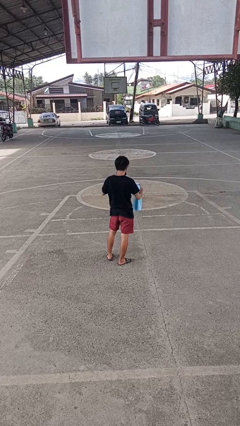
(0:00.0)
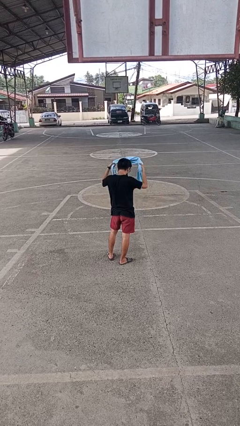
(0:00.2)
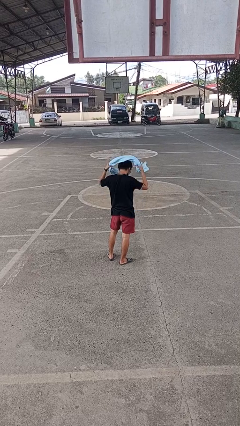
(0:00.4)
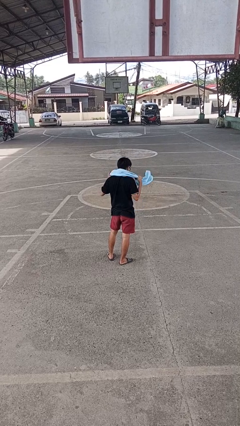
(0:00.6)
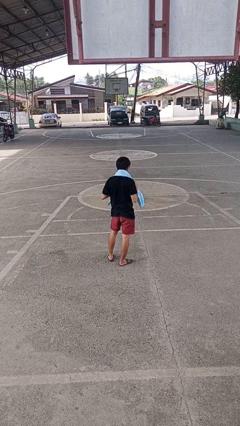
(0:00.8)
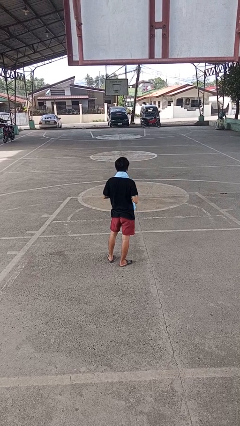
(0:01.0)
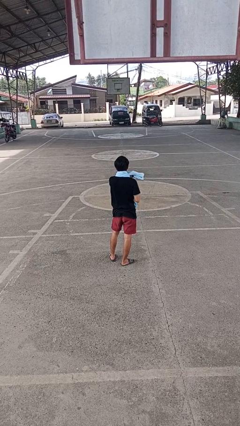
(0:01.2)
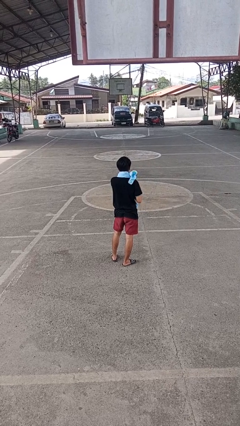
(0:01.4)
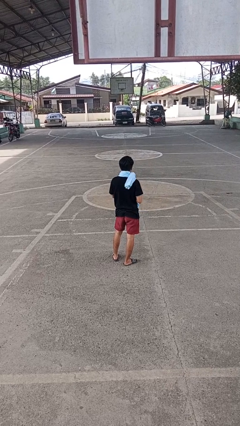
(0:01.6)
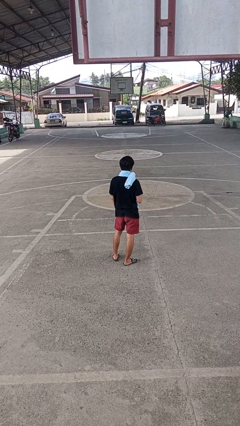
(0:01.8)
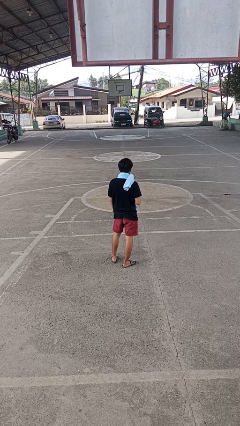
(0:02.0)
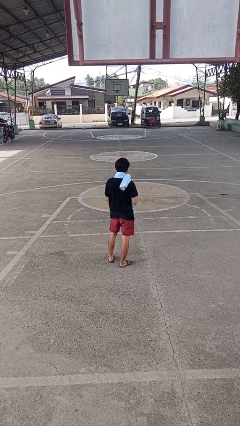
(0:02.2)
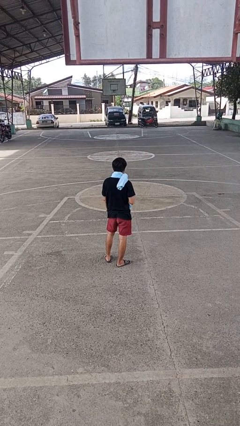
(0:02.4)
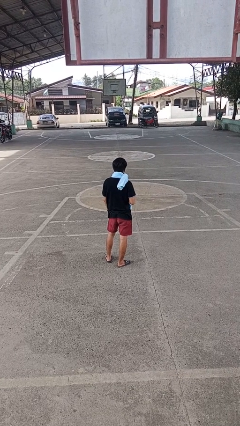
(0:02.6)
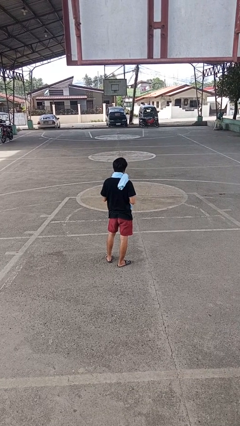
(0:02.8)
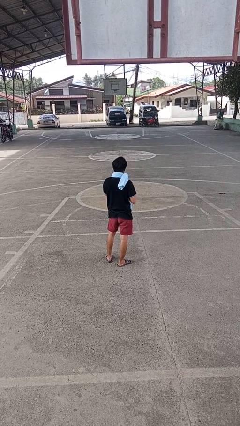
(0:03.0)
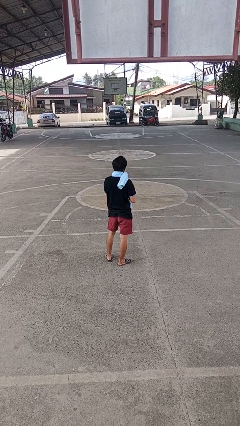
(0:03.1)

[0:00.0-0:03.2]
person puts on scarf

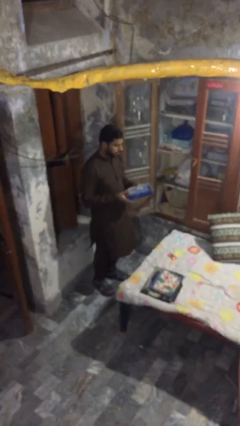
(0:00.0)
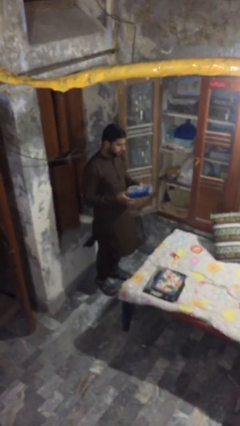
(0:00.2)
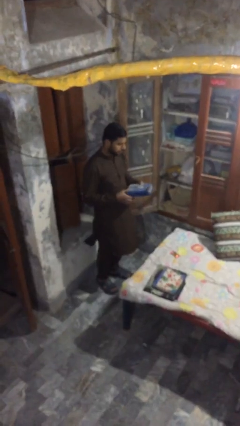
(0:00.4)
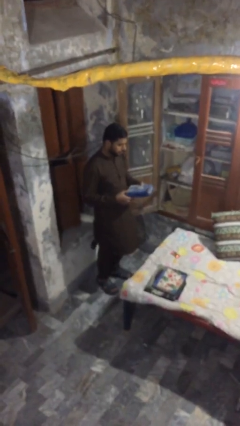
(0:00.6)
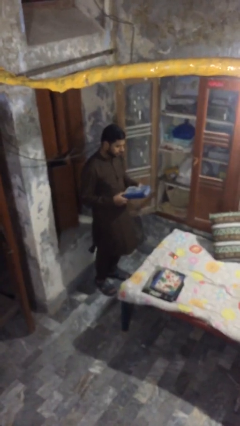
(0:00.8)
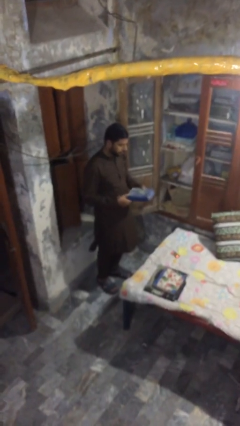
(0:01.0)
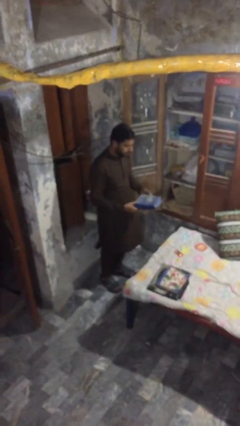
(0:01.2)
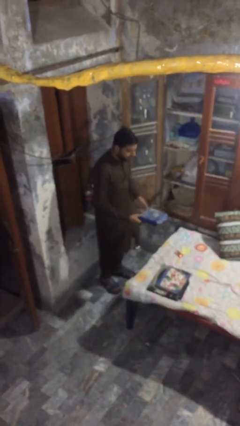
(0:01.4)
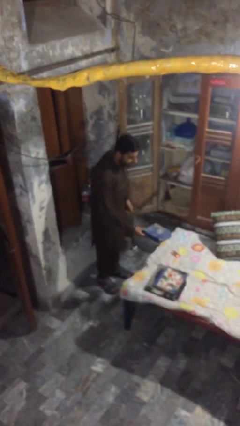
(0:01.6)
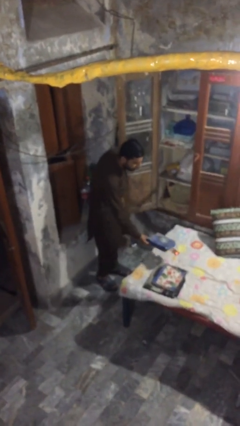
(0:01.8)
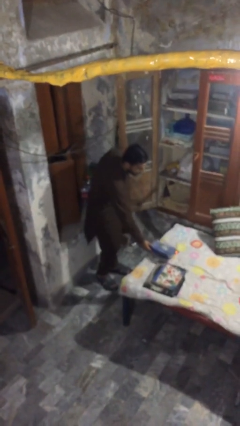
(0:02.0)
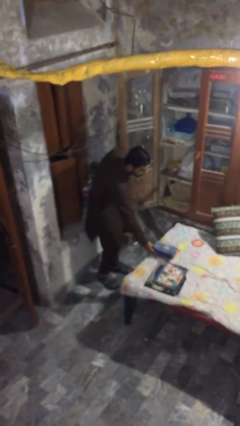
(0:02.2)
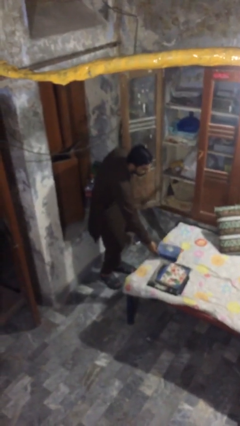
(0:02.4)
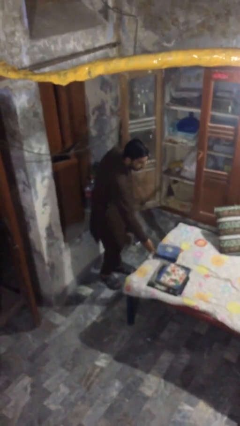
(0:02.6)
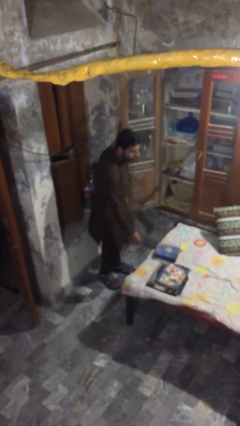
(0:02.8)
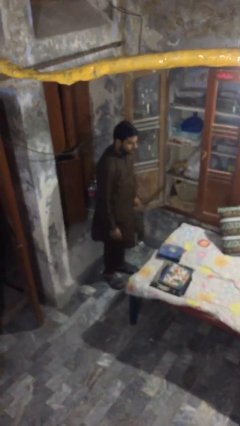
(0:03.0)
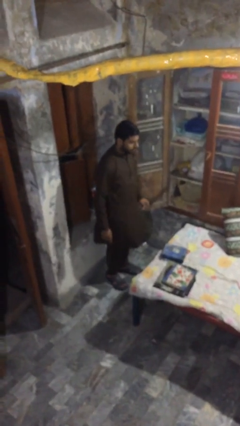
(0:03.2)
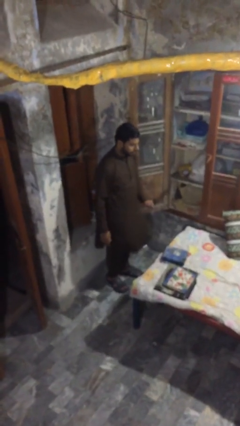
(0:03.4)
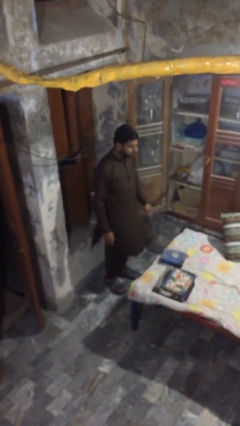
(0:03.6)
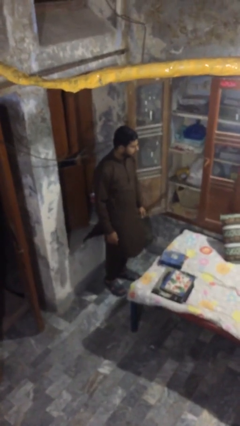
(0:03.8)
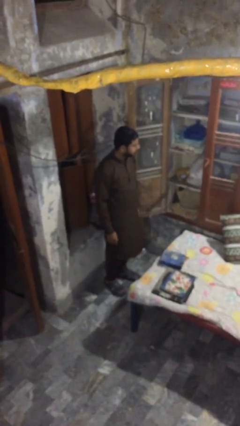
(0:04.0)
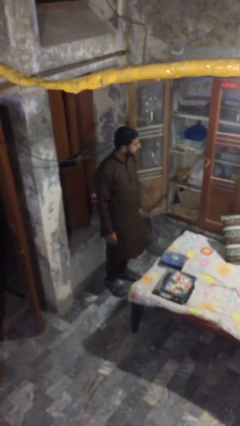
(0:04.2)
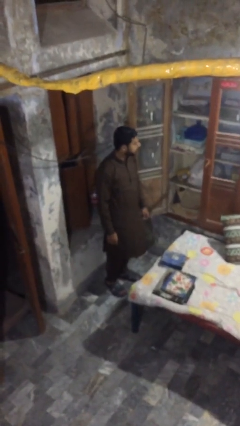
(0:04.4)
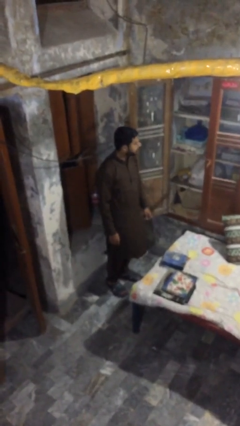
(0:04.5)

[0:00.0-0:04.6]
person puts down object on table

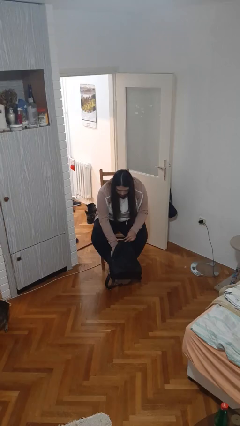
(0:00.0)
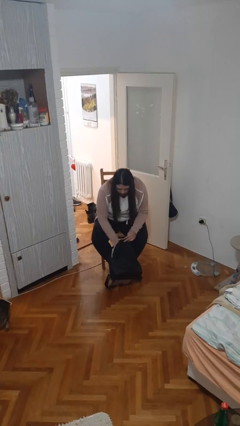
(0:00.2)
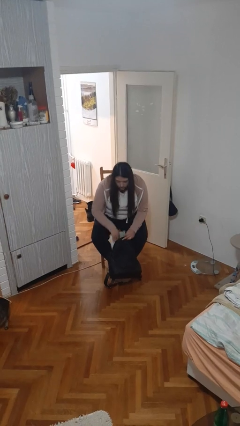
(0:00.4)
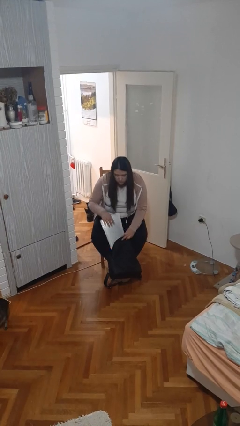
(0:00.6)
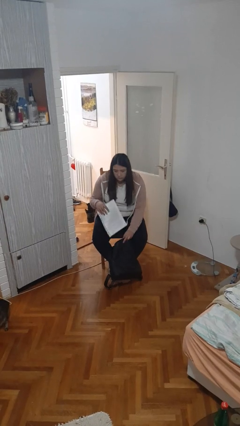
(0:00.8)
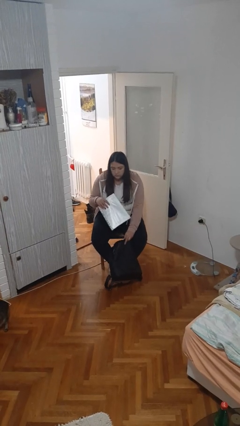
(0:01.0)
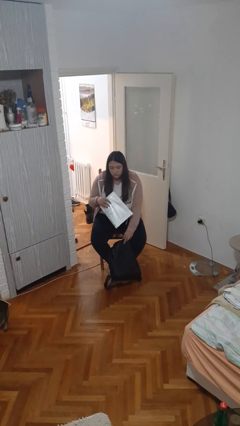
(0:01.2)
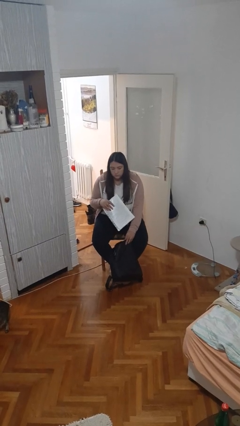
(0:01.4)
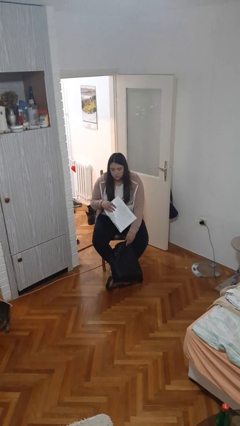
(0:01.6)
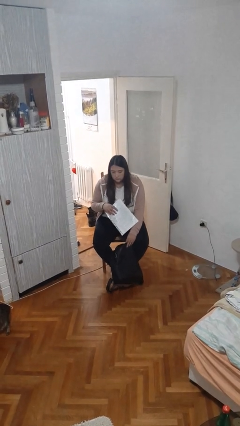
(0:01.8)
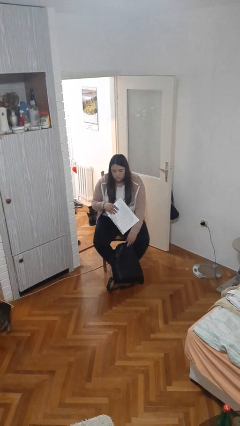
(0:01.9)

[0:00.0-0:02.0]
person takes object from backpack

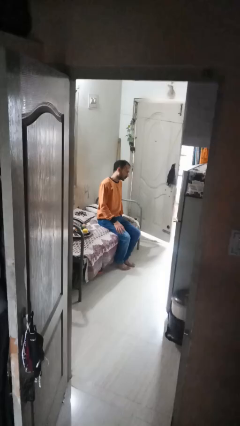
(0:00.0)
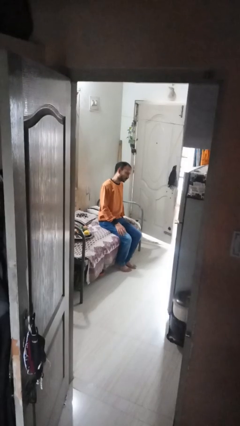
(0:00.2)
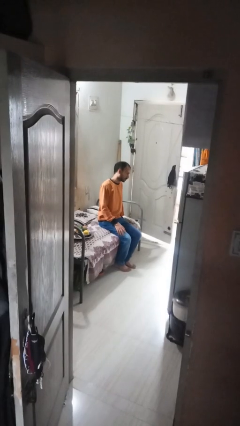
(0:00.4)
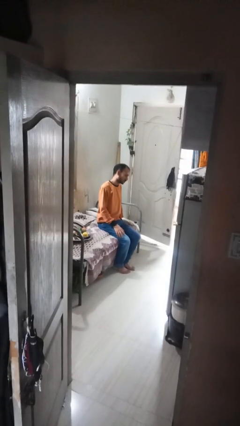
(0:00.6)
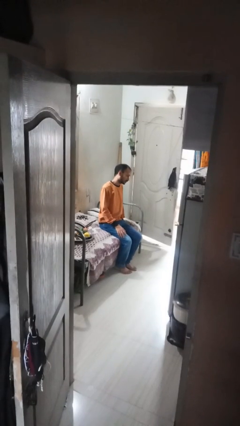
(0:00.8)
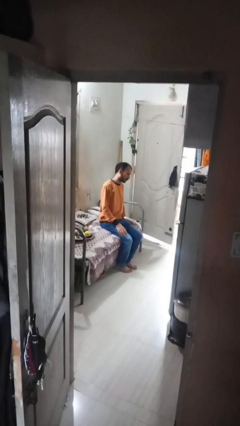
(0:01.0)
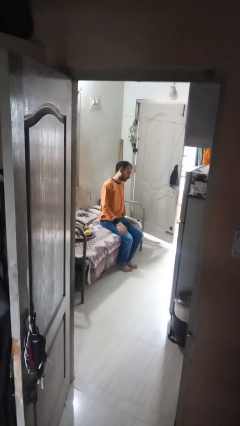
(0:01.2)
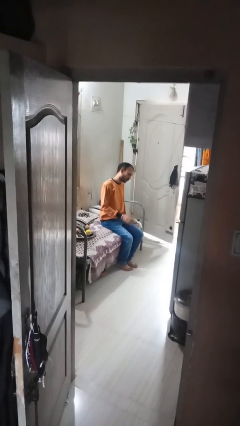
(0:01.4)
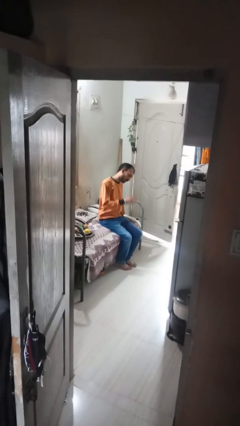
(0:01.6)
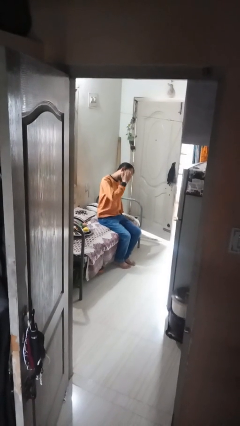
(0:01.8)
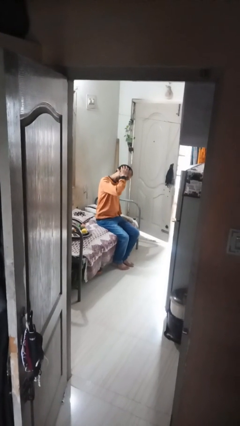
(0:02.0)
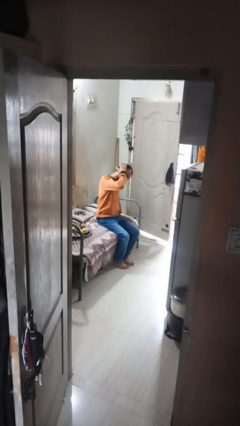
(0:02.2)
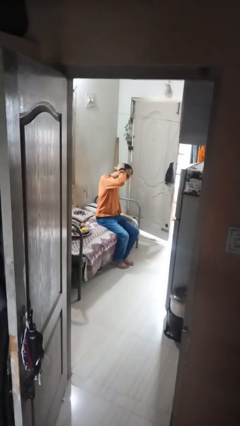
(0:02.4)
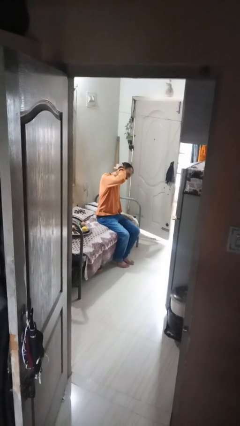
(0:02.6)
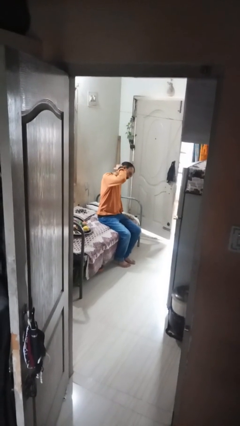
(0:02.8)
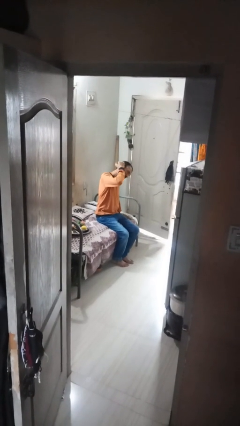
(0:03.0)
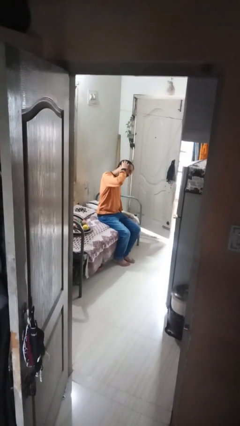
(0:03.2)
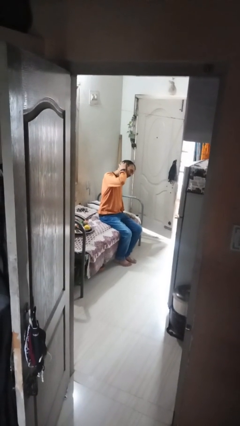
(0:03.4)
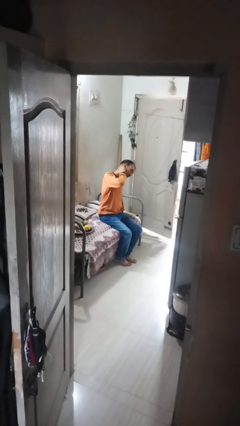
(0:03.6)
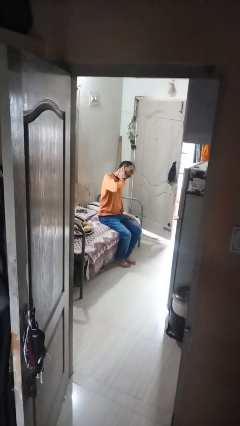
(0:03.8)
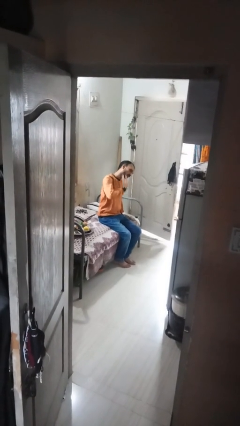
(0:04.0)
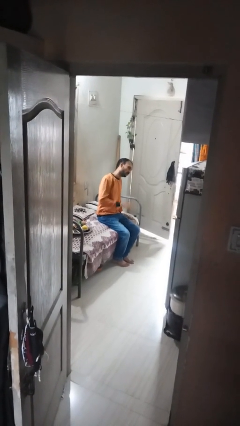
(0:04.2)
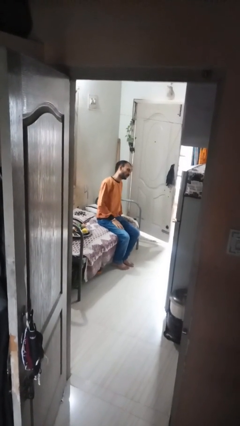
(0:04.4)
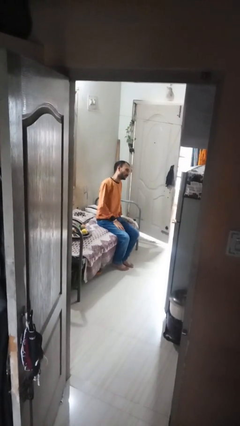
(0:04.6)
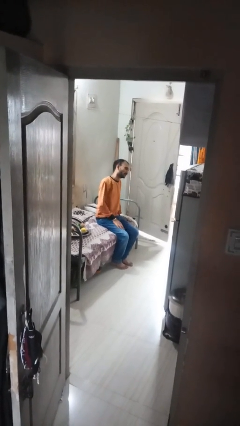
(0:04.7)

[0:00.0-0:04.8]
person strokes hair

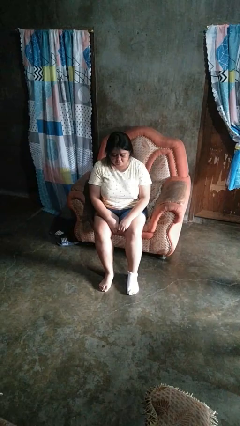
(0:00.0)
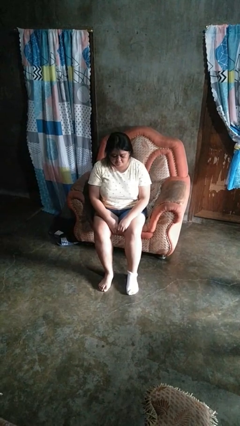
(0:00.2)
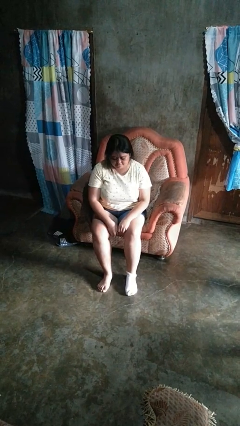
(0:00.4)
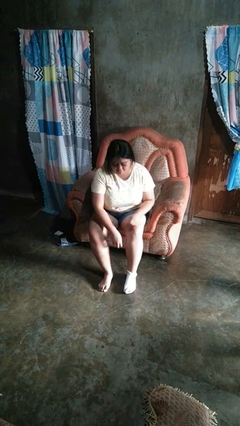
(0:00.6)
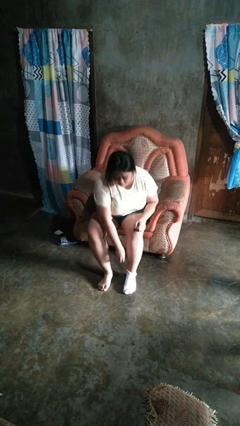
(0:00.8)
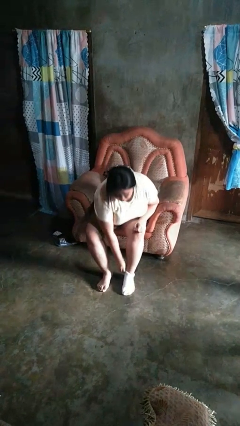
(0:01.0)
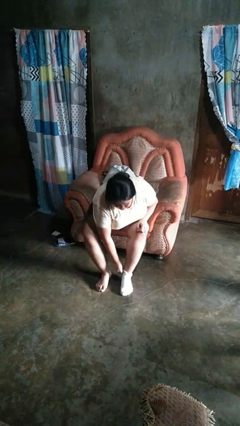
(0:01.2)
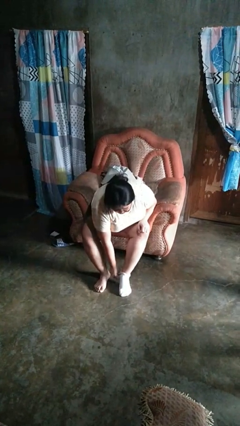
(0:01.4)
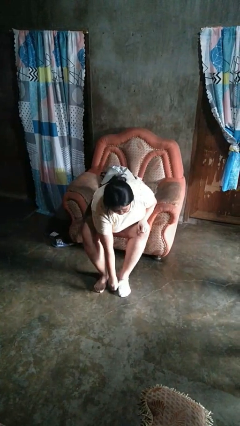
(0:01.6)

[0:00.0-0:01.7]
person takes off socks

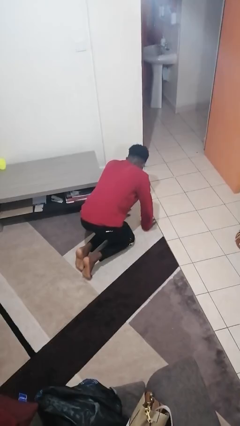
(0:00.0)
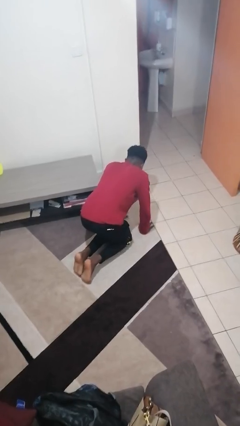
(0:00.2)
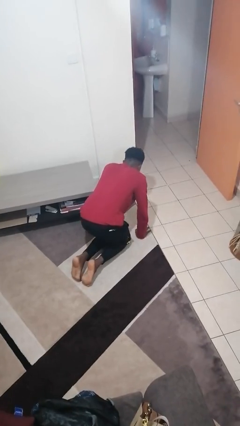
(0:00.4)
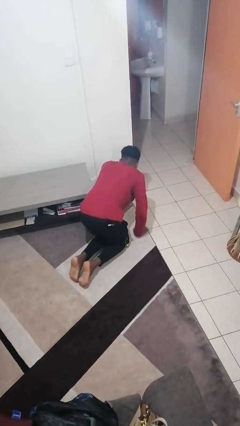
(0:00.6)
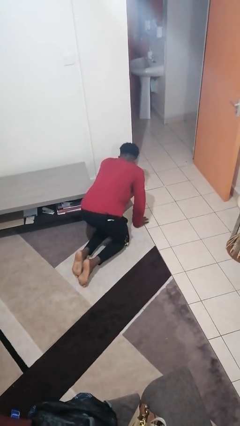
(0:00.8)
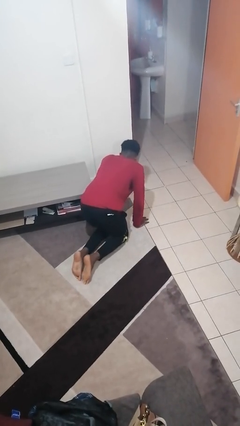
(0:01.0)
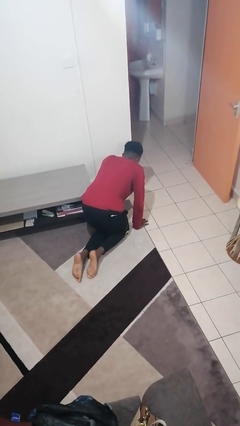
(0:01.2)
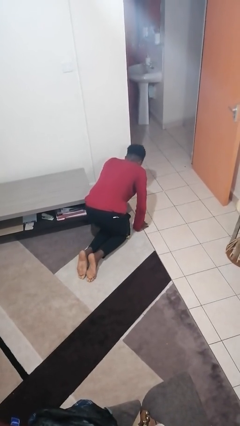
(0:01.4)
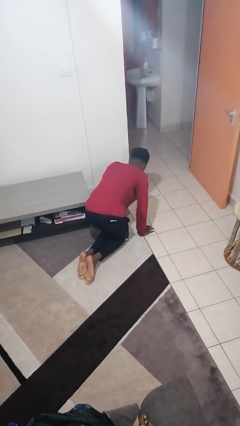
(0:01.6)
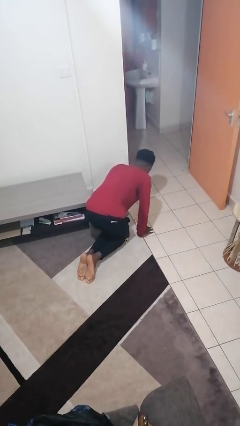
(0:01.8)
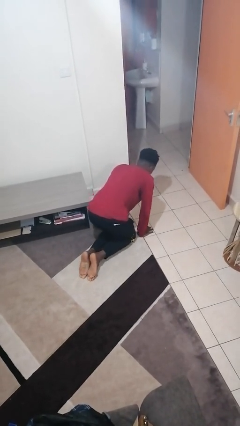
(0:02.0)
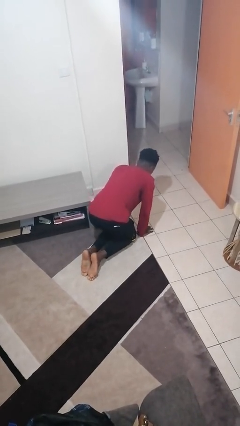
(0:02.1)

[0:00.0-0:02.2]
person crawls
